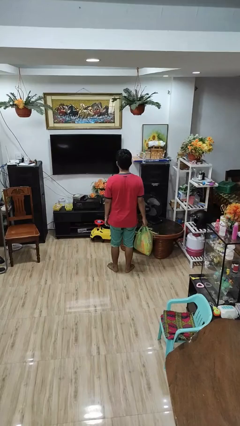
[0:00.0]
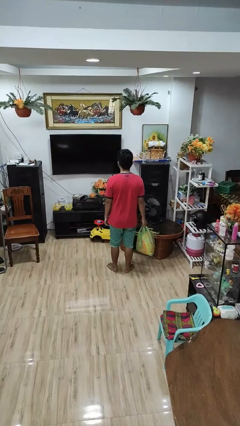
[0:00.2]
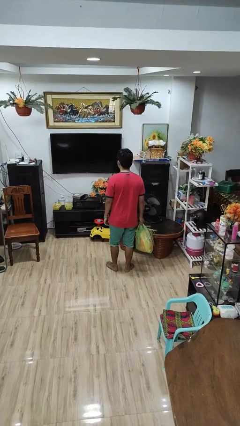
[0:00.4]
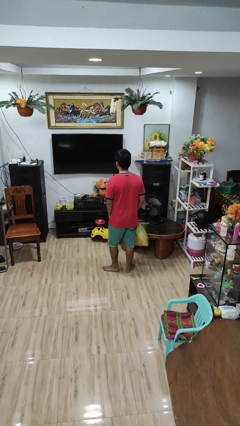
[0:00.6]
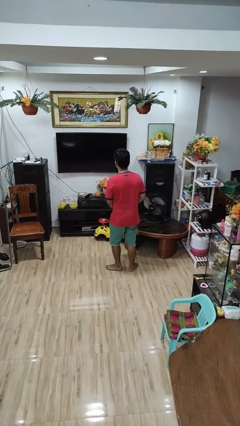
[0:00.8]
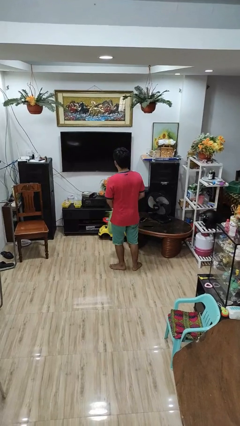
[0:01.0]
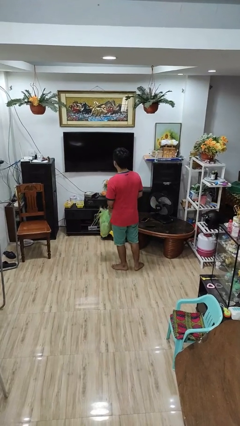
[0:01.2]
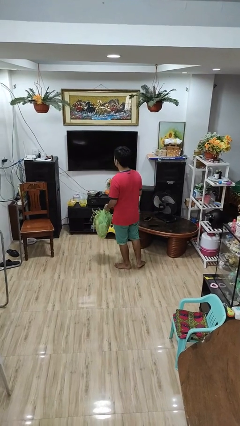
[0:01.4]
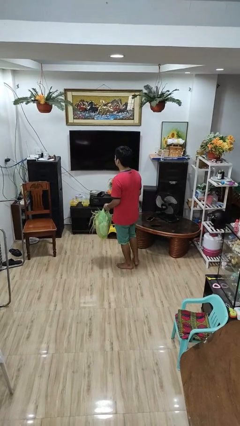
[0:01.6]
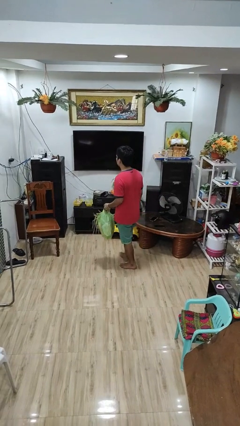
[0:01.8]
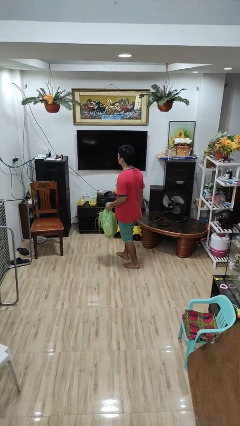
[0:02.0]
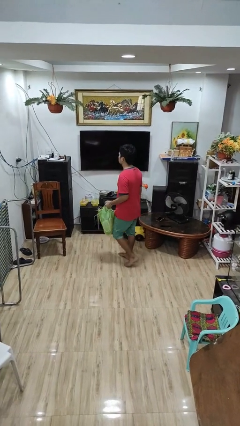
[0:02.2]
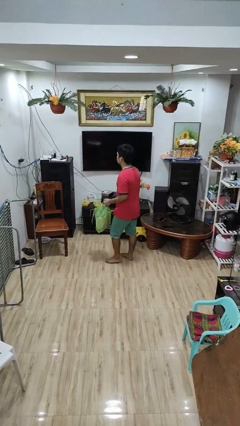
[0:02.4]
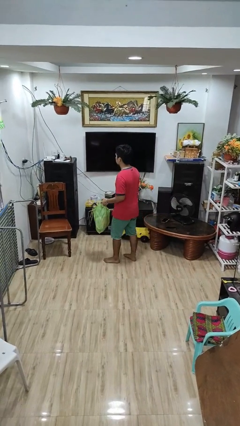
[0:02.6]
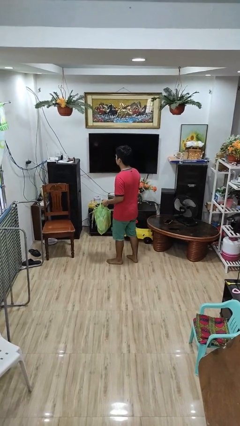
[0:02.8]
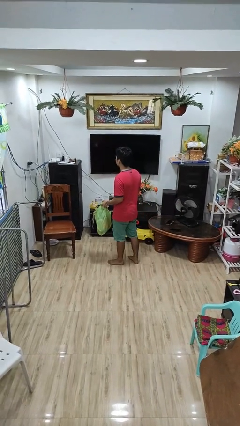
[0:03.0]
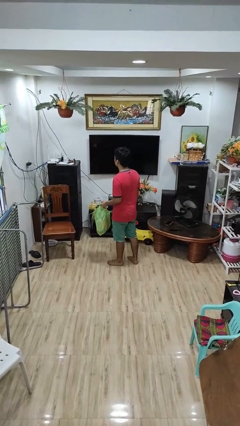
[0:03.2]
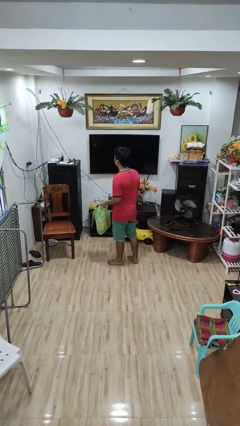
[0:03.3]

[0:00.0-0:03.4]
person carries groceries

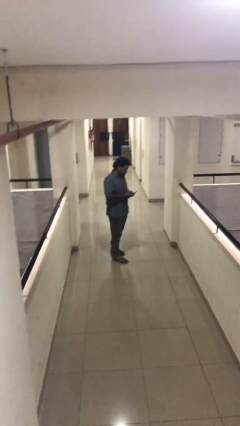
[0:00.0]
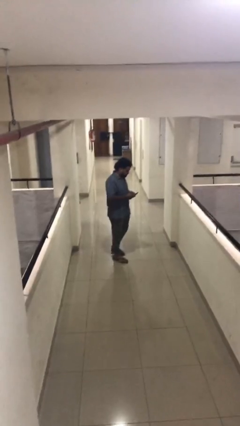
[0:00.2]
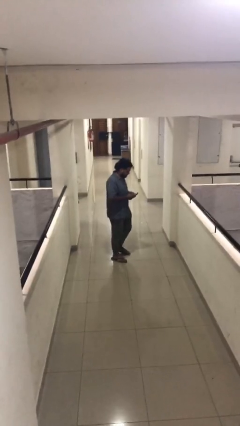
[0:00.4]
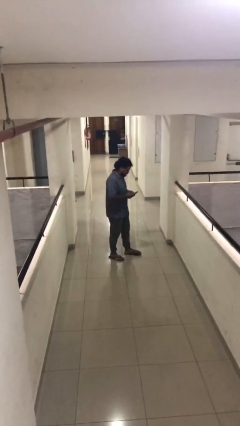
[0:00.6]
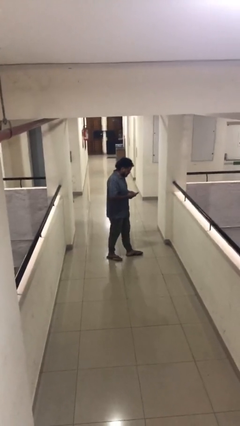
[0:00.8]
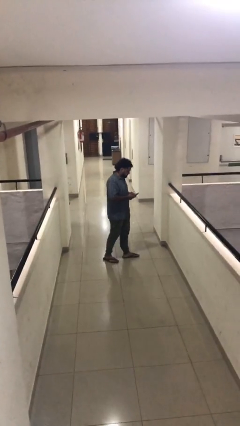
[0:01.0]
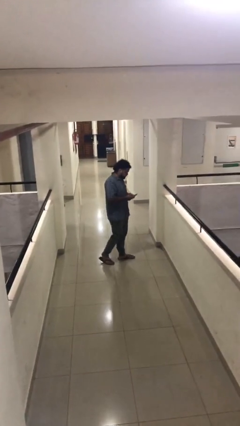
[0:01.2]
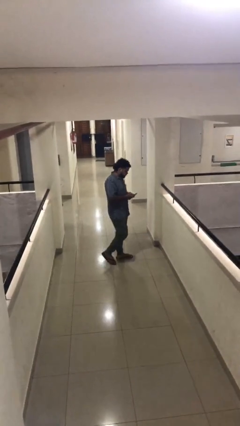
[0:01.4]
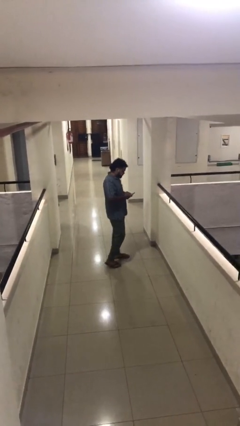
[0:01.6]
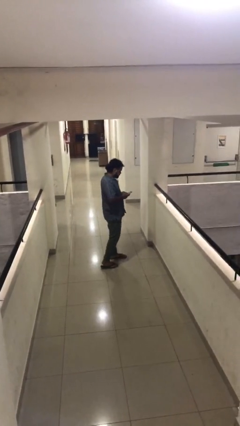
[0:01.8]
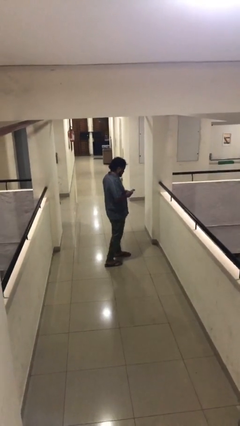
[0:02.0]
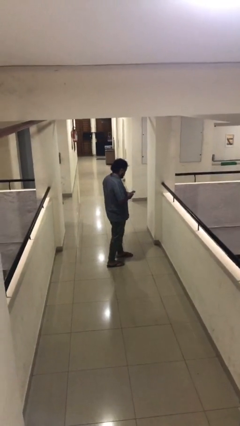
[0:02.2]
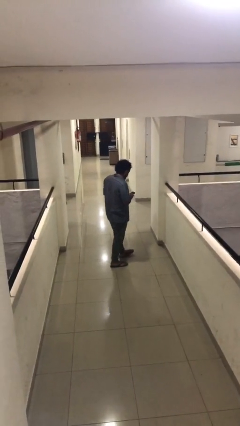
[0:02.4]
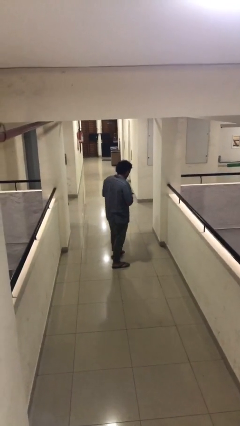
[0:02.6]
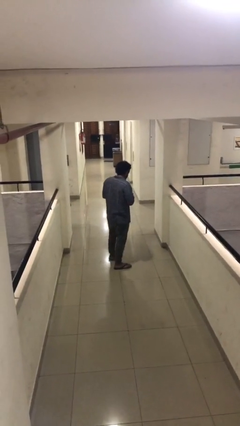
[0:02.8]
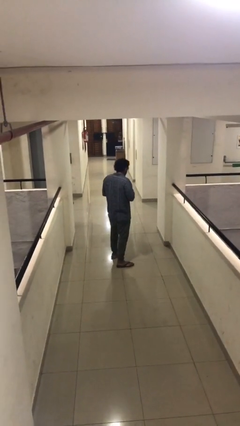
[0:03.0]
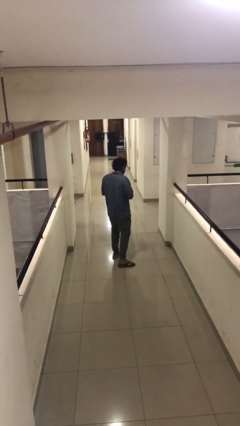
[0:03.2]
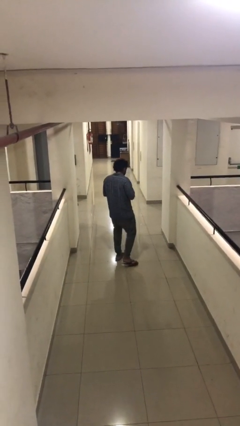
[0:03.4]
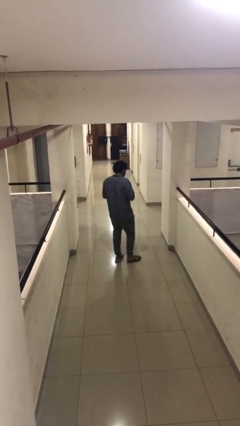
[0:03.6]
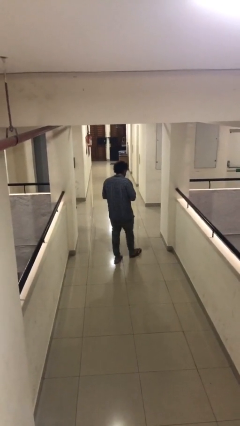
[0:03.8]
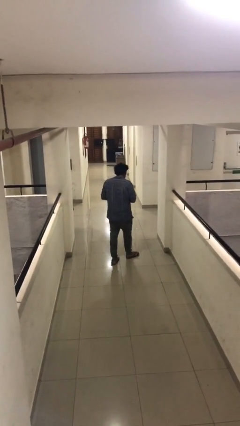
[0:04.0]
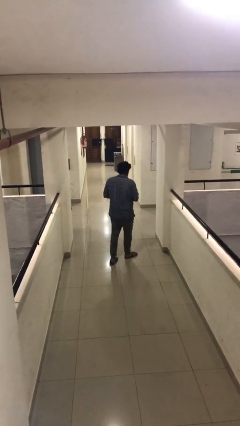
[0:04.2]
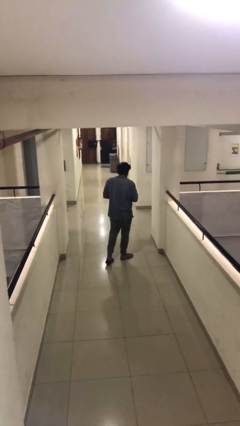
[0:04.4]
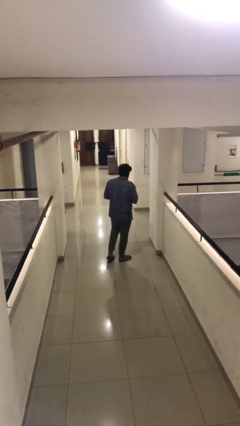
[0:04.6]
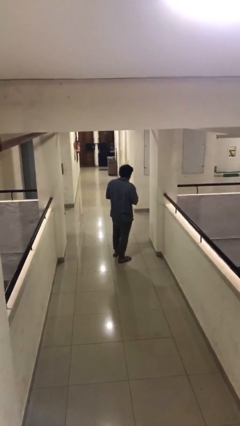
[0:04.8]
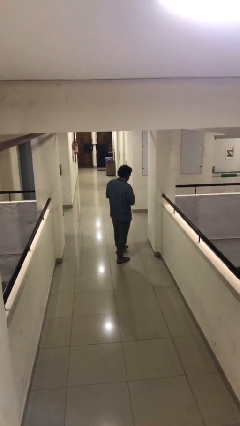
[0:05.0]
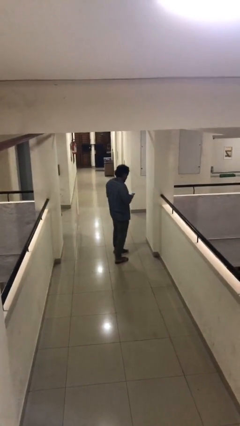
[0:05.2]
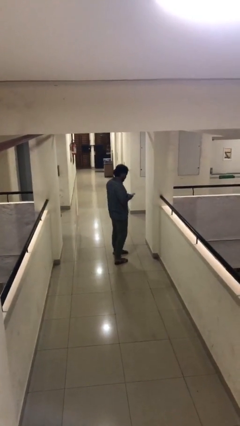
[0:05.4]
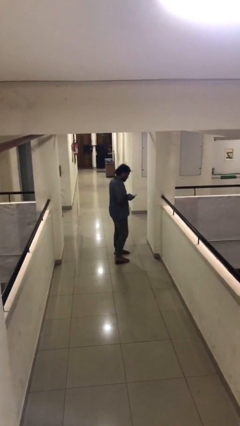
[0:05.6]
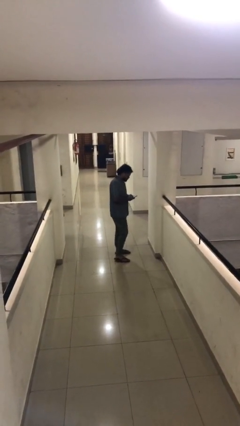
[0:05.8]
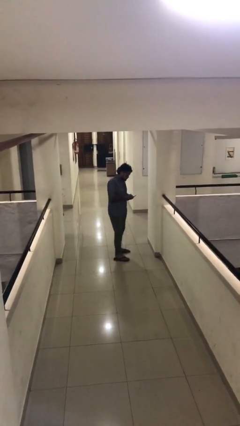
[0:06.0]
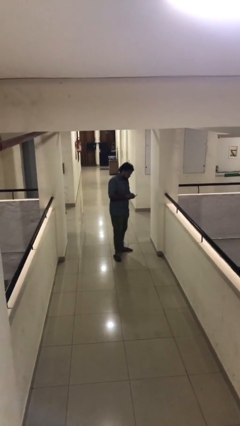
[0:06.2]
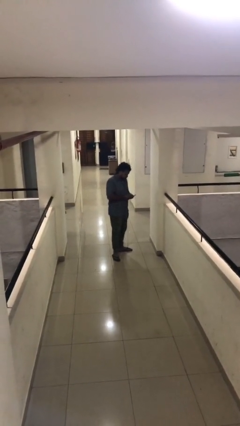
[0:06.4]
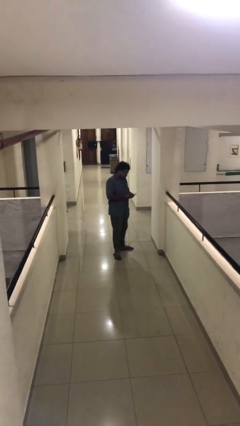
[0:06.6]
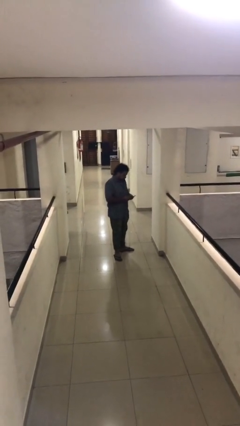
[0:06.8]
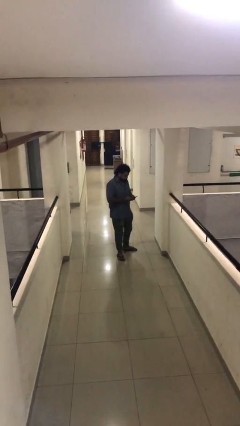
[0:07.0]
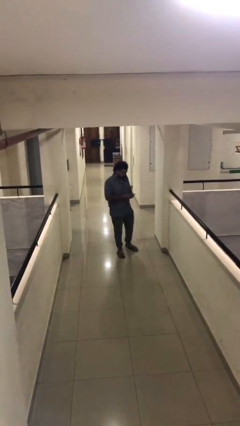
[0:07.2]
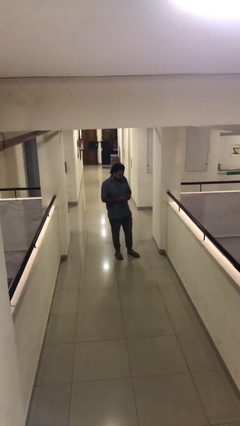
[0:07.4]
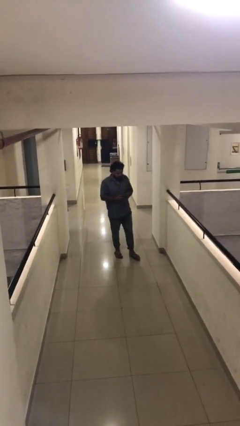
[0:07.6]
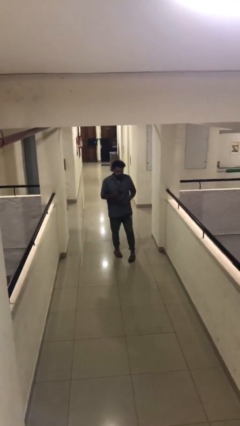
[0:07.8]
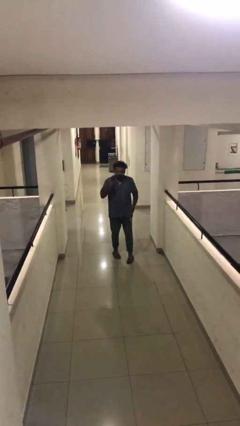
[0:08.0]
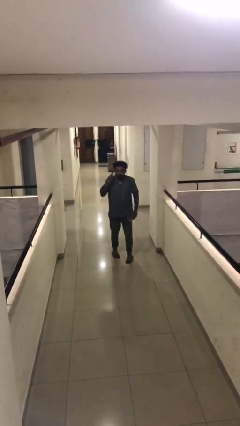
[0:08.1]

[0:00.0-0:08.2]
person texts on phone

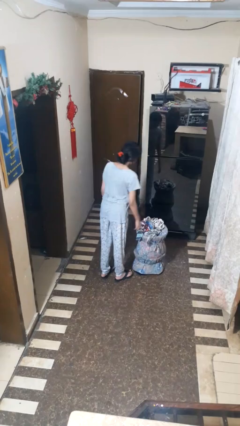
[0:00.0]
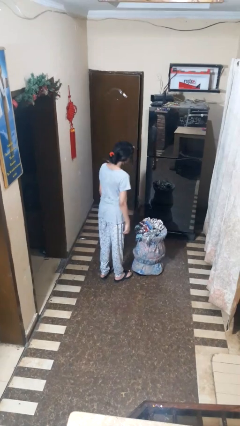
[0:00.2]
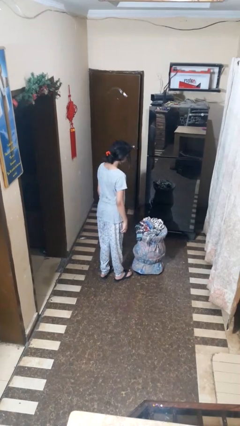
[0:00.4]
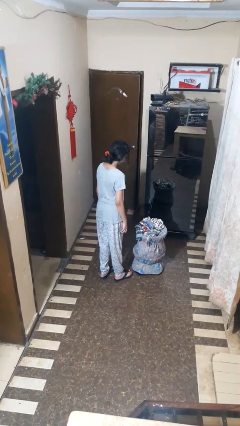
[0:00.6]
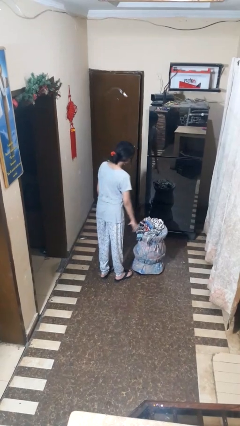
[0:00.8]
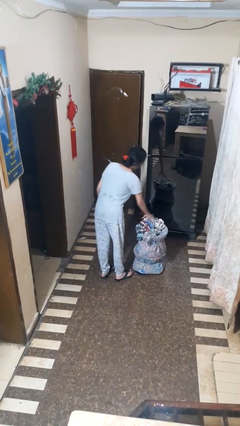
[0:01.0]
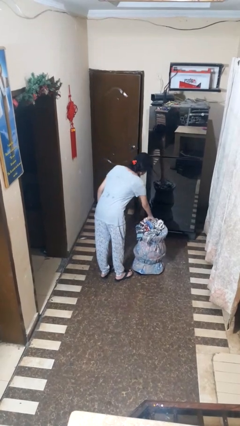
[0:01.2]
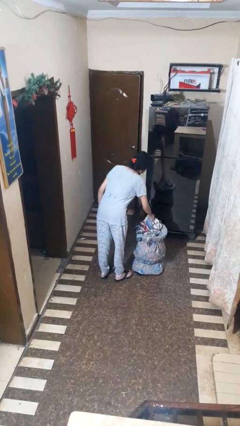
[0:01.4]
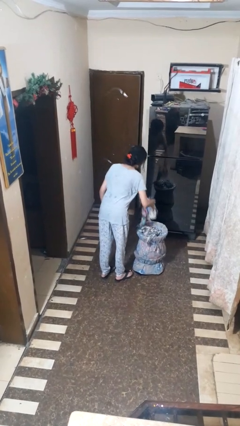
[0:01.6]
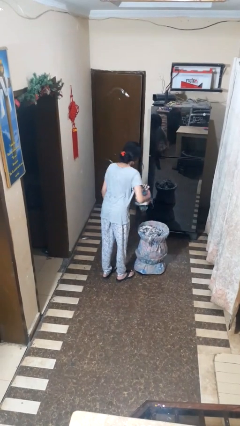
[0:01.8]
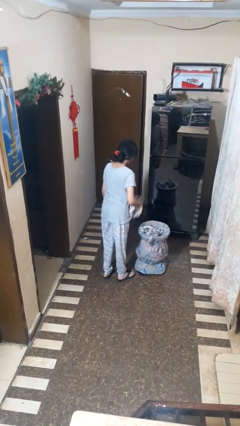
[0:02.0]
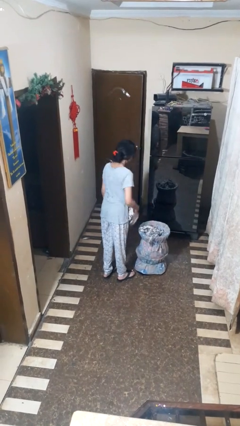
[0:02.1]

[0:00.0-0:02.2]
person takes object from basket

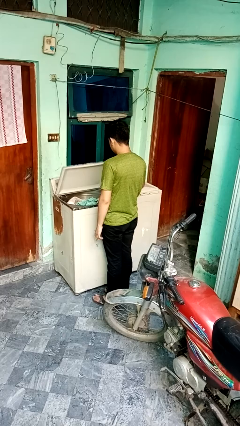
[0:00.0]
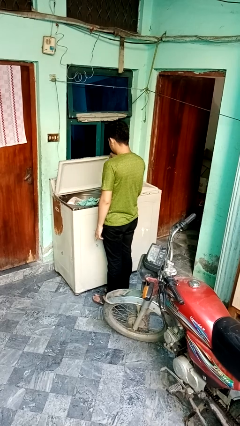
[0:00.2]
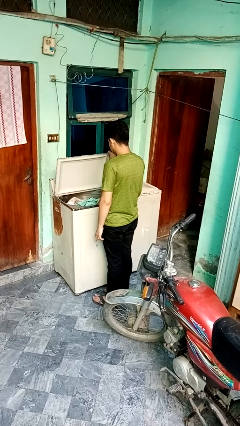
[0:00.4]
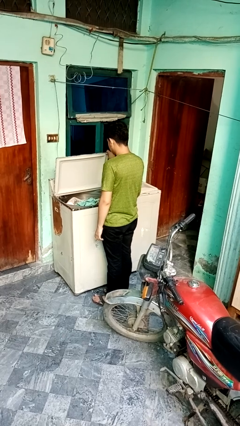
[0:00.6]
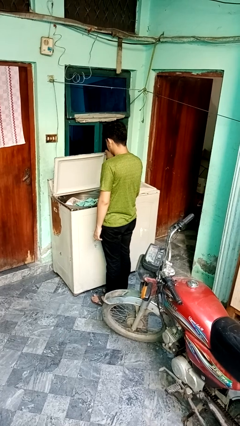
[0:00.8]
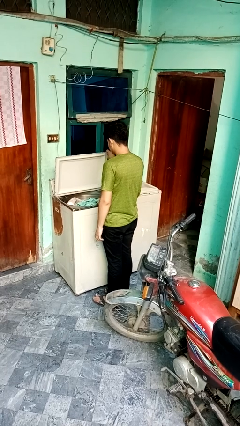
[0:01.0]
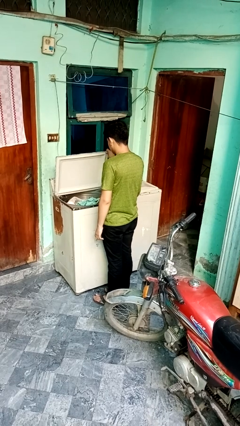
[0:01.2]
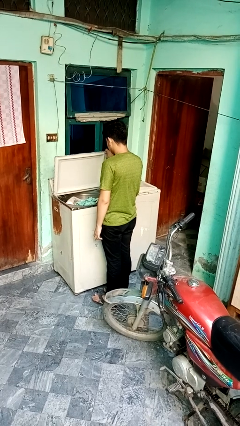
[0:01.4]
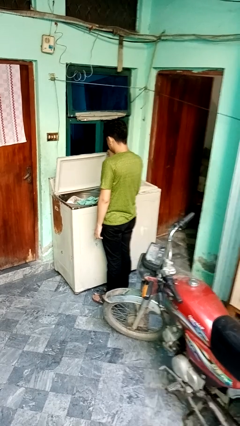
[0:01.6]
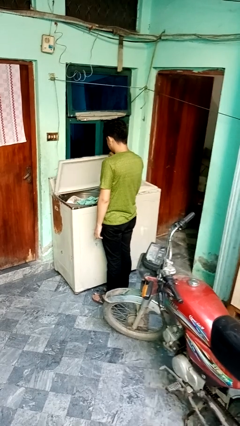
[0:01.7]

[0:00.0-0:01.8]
person opens clothes washer

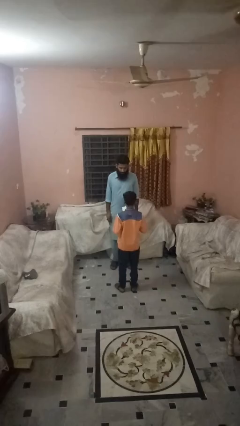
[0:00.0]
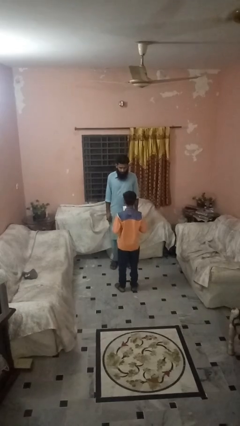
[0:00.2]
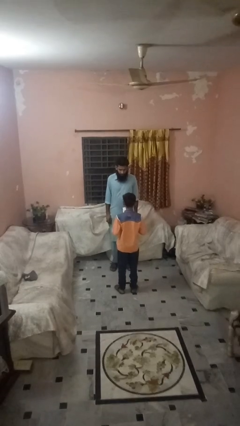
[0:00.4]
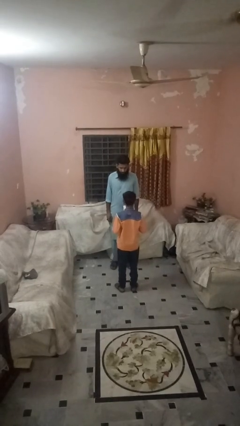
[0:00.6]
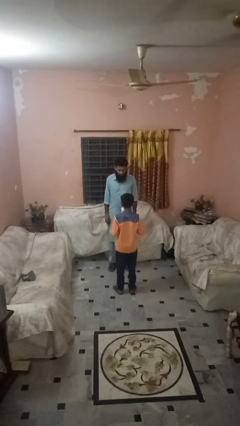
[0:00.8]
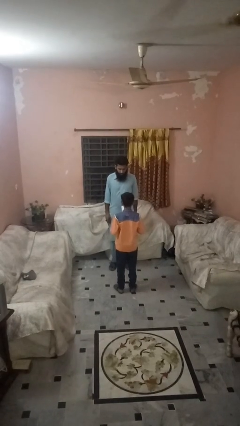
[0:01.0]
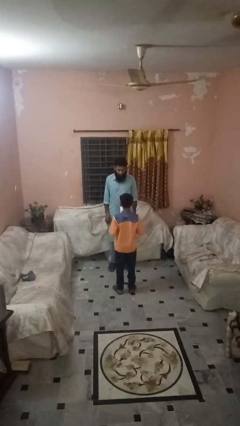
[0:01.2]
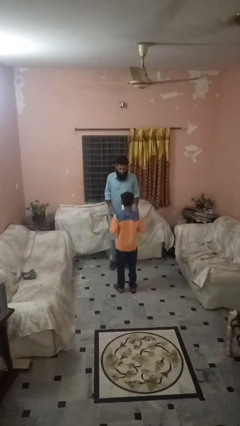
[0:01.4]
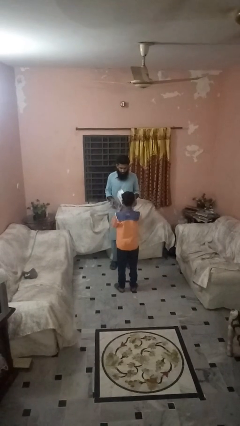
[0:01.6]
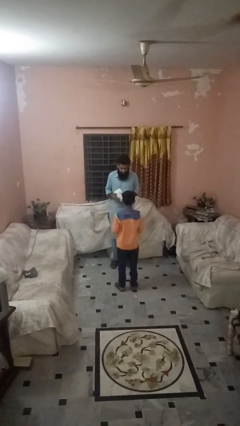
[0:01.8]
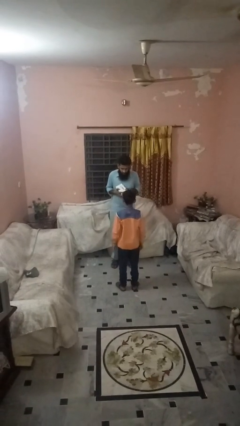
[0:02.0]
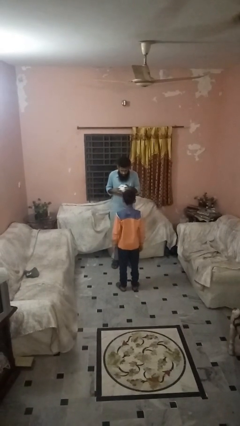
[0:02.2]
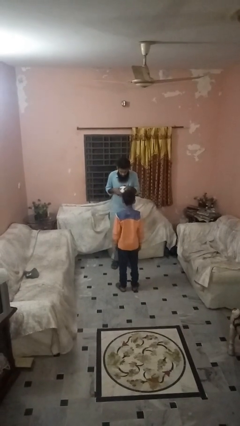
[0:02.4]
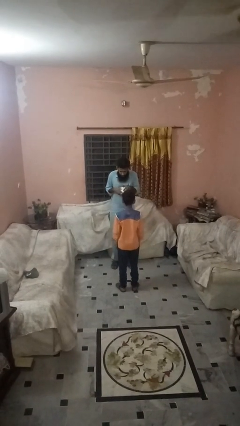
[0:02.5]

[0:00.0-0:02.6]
person catches object from person
